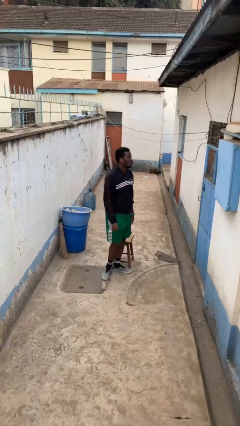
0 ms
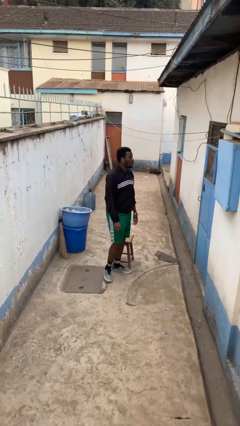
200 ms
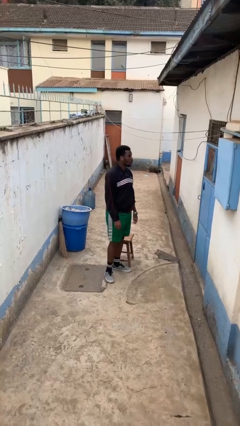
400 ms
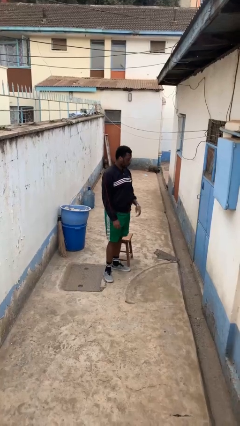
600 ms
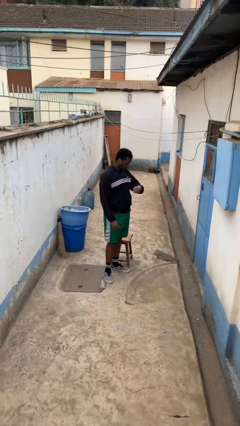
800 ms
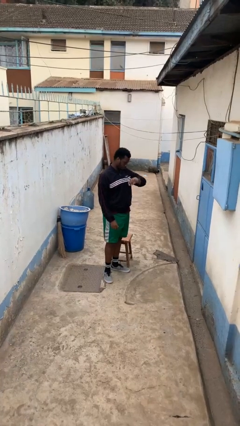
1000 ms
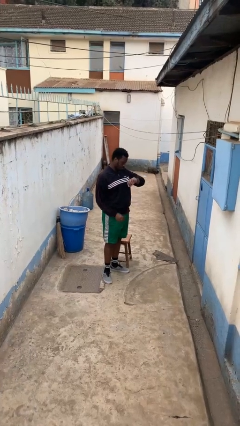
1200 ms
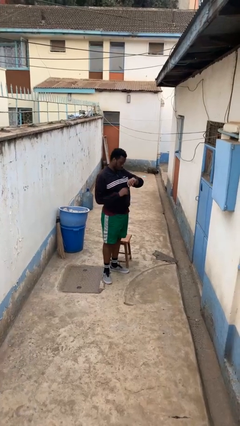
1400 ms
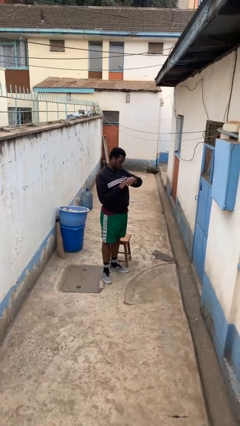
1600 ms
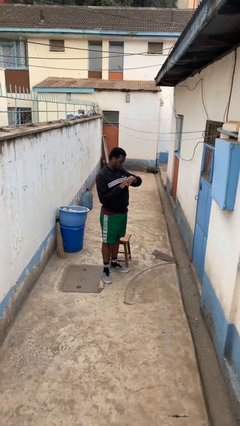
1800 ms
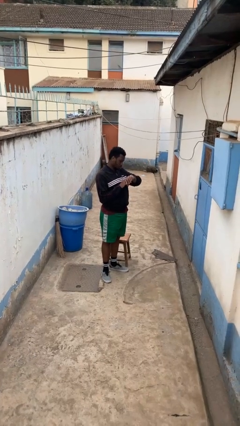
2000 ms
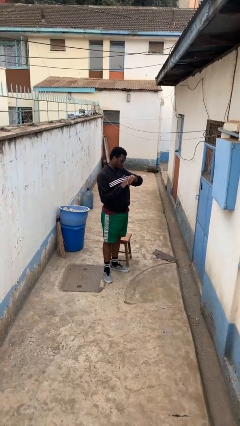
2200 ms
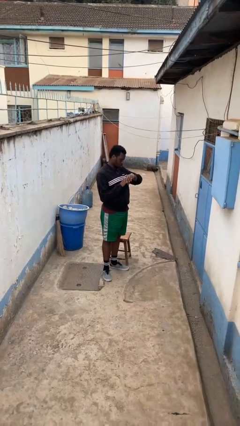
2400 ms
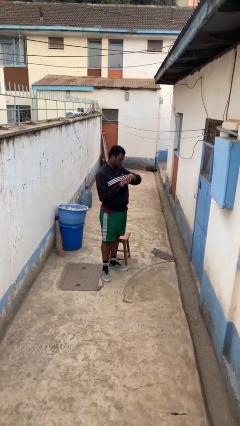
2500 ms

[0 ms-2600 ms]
person looks at wristwatch

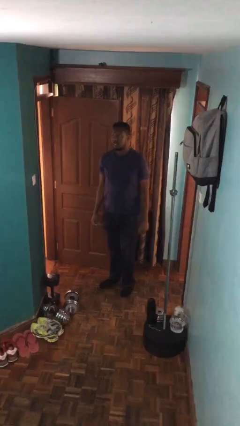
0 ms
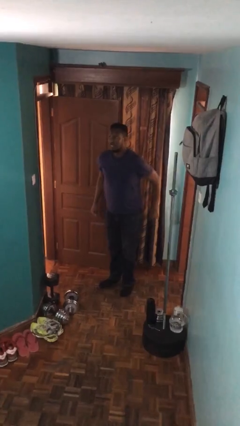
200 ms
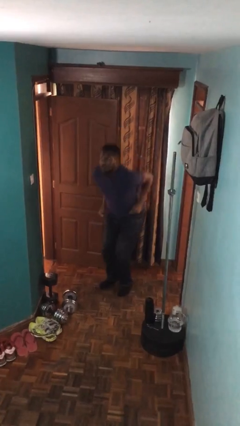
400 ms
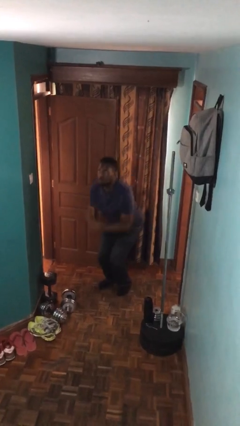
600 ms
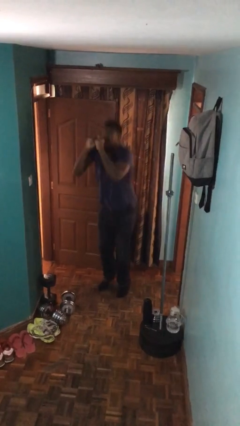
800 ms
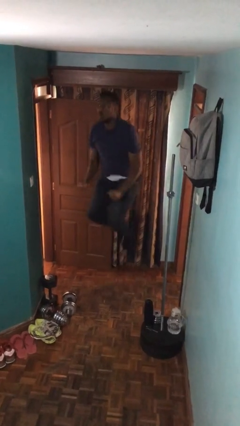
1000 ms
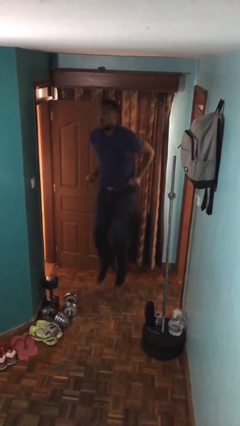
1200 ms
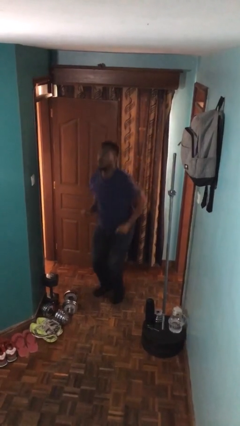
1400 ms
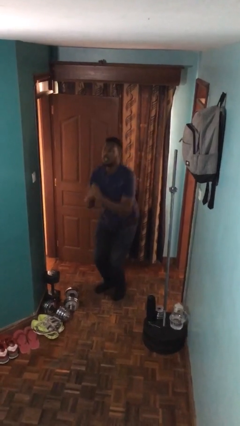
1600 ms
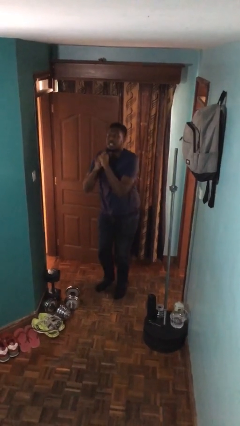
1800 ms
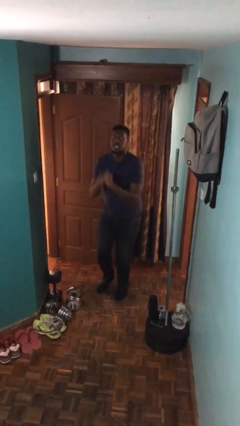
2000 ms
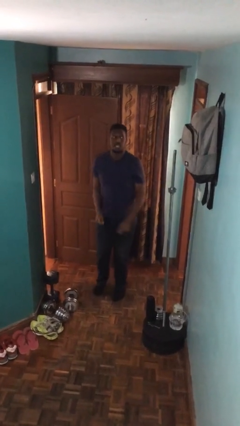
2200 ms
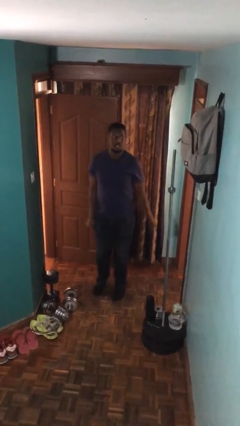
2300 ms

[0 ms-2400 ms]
person jumps

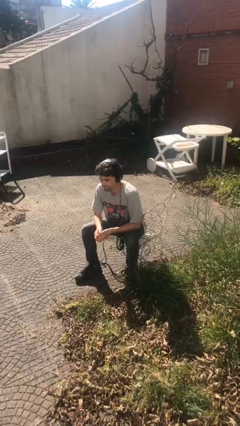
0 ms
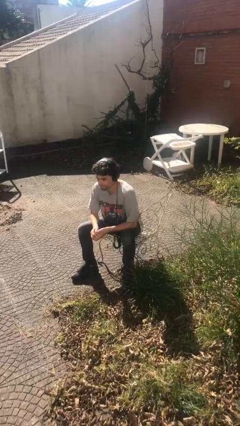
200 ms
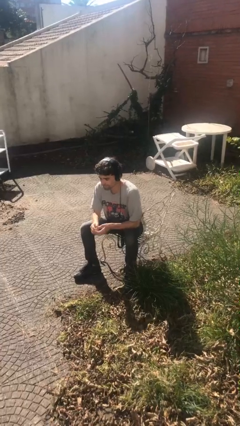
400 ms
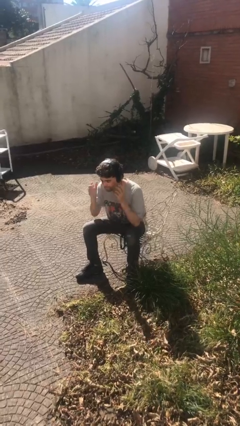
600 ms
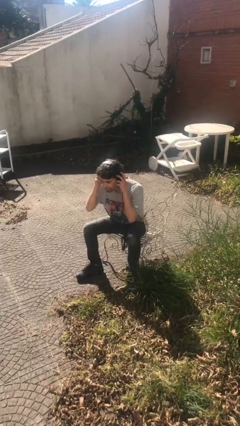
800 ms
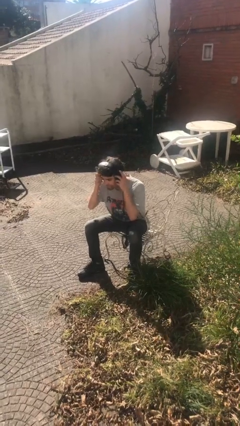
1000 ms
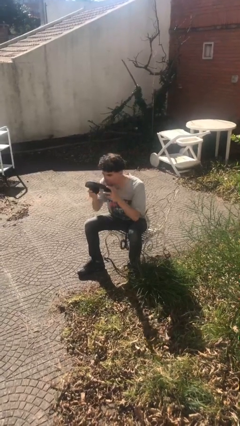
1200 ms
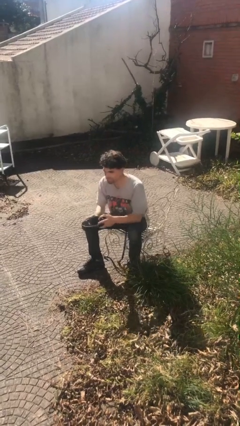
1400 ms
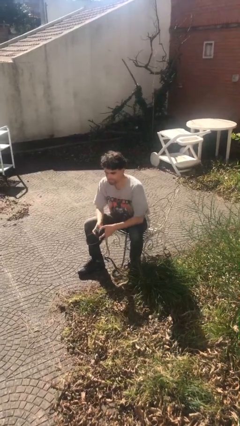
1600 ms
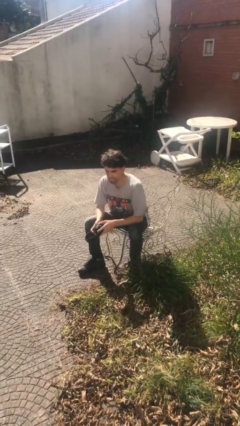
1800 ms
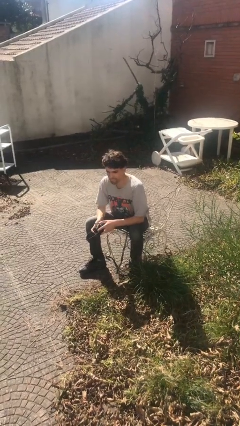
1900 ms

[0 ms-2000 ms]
person takes off headphones

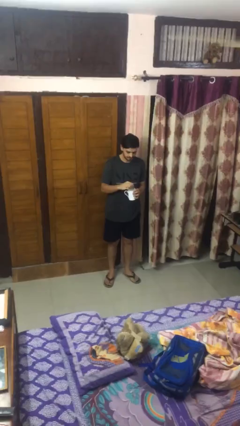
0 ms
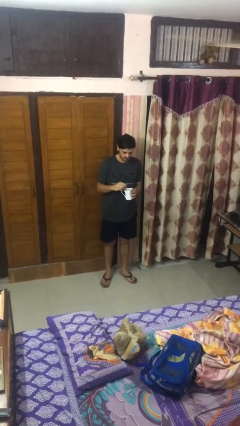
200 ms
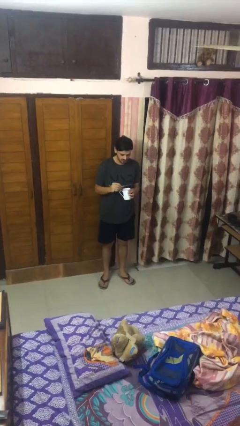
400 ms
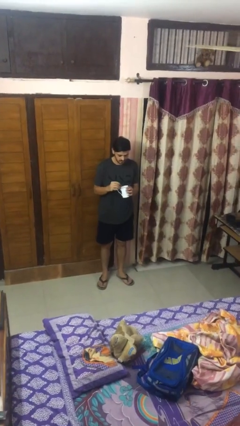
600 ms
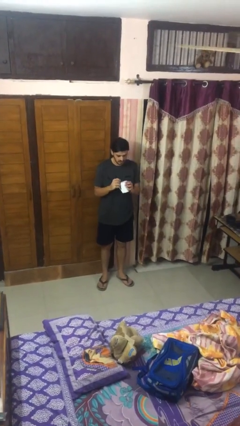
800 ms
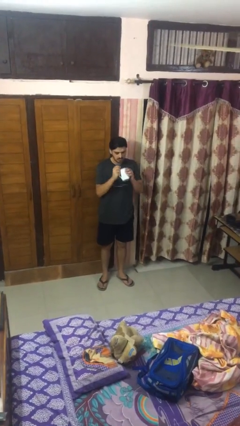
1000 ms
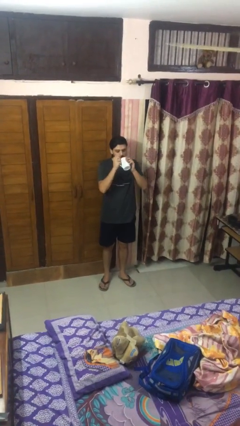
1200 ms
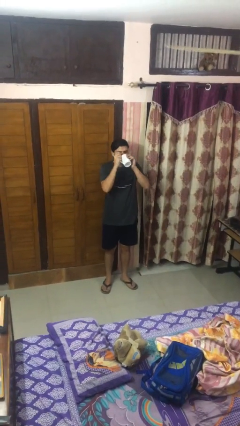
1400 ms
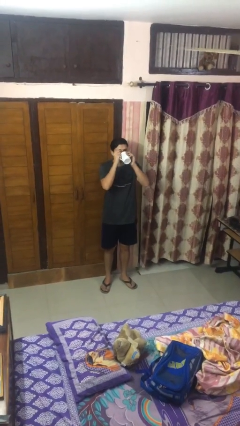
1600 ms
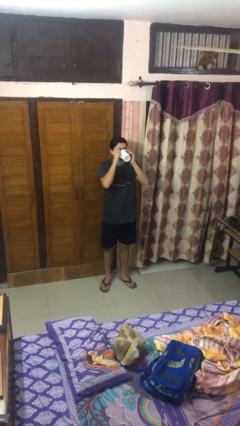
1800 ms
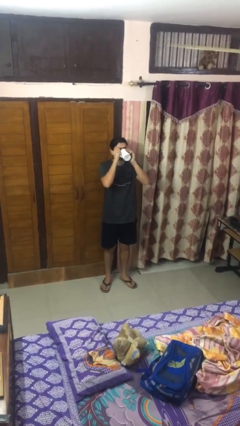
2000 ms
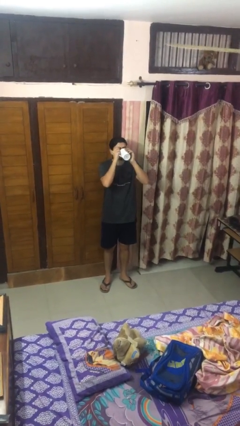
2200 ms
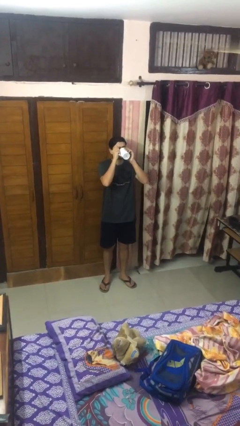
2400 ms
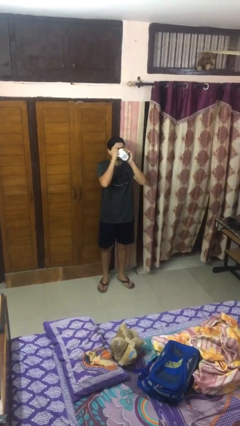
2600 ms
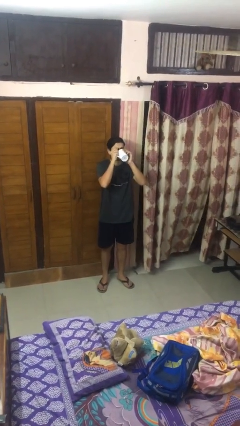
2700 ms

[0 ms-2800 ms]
person drinks from mug

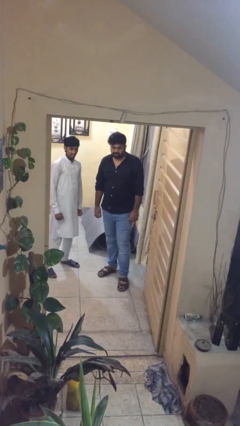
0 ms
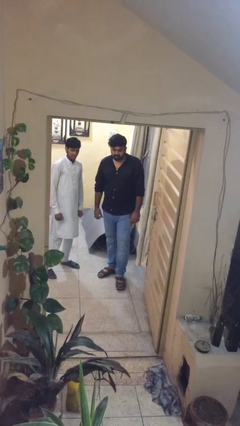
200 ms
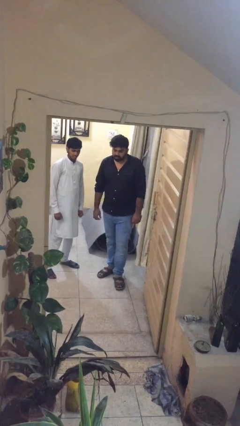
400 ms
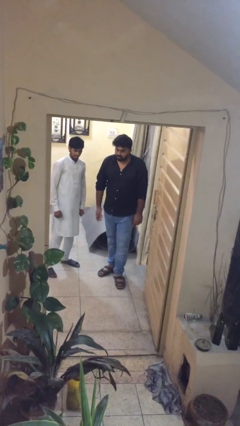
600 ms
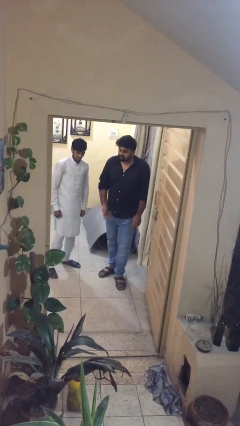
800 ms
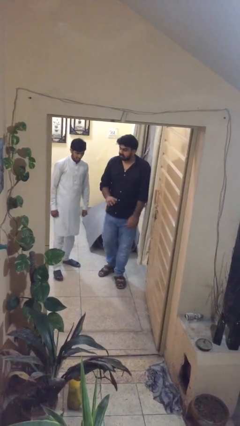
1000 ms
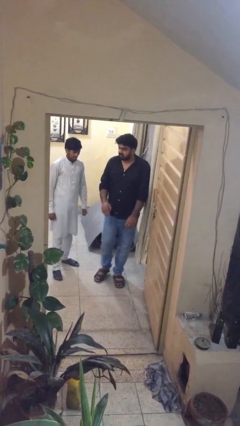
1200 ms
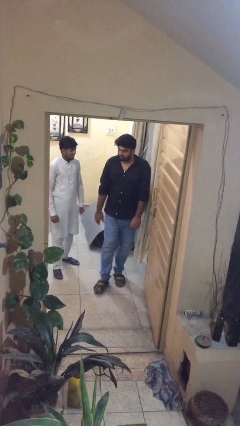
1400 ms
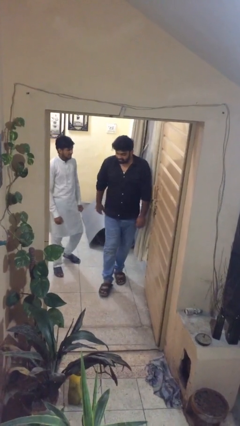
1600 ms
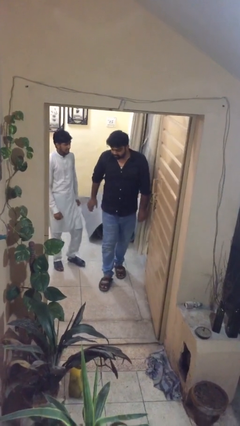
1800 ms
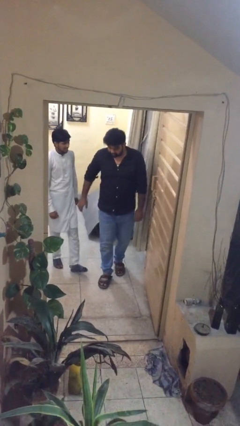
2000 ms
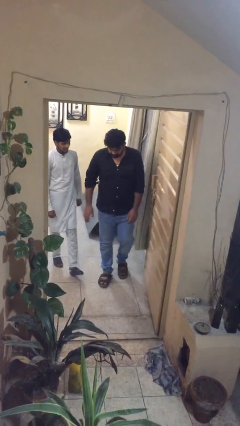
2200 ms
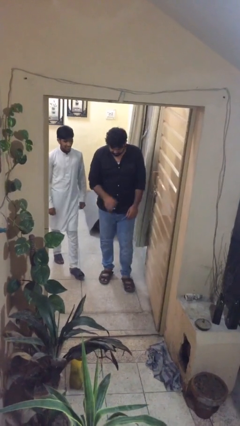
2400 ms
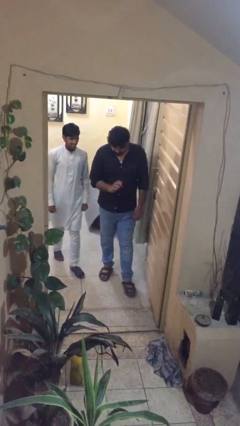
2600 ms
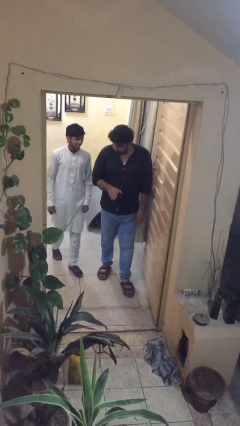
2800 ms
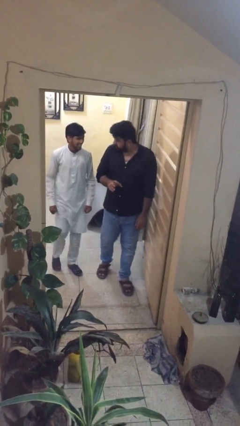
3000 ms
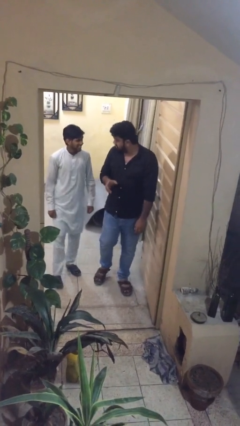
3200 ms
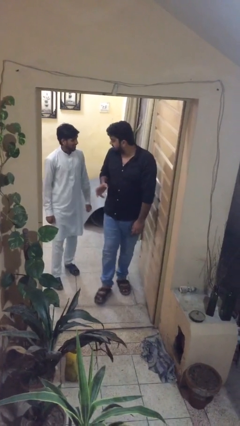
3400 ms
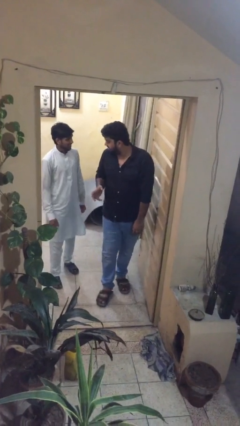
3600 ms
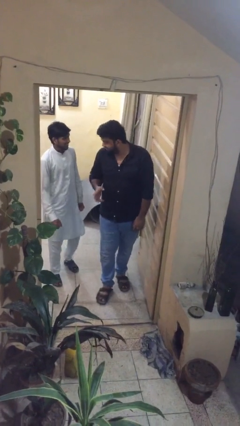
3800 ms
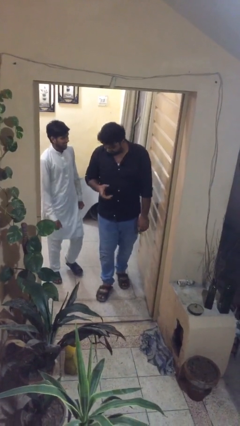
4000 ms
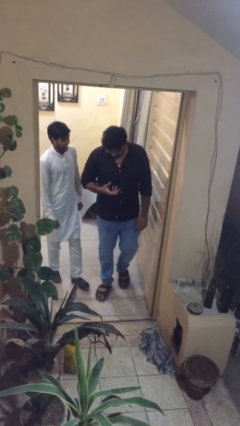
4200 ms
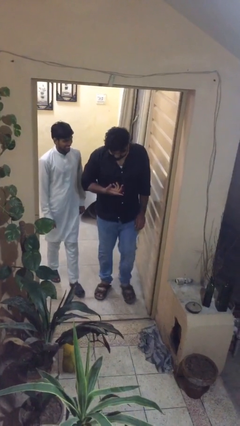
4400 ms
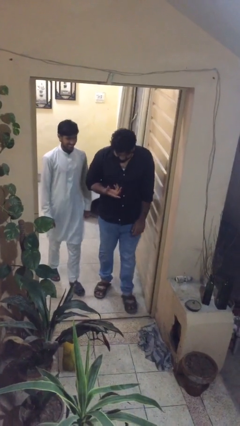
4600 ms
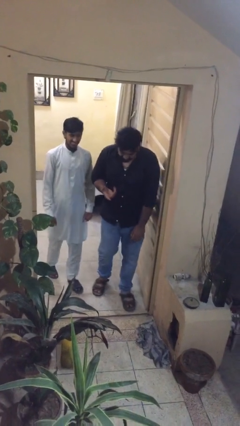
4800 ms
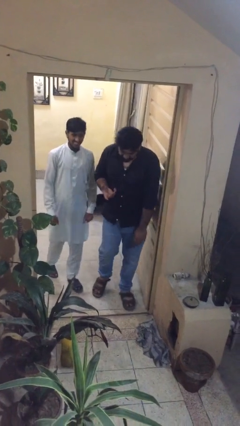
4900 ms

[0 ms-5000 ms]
person talks to person

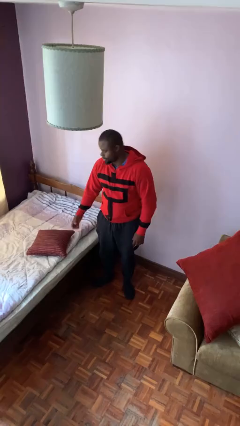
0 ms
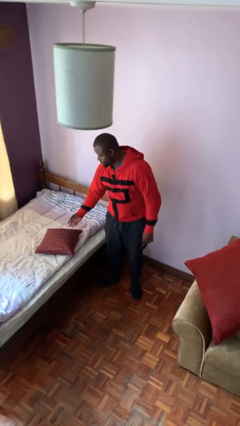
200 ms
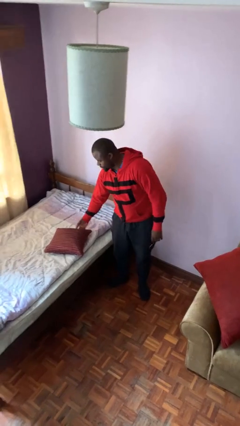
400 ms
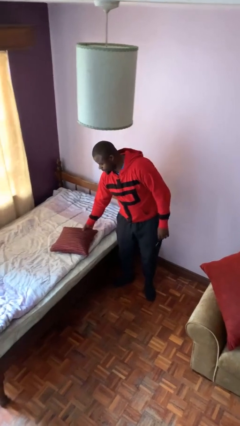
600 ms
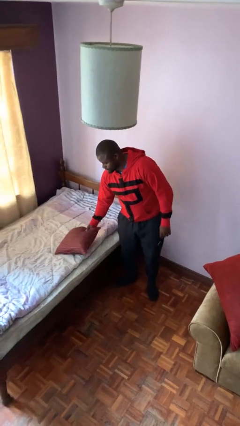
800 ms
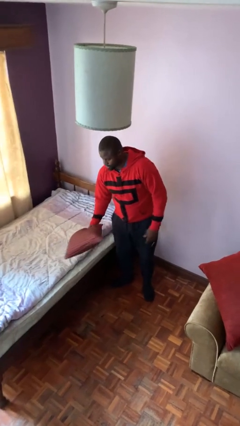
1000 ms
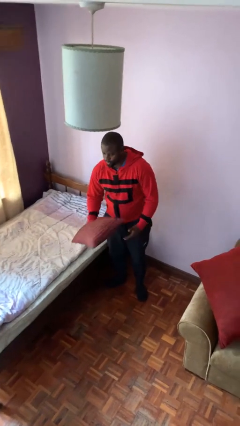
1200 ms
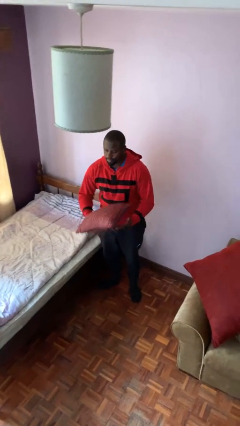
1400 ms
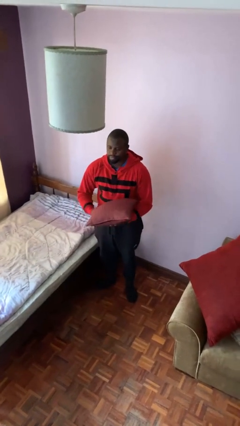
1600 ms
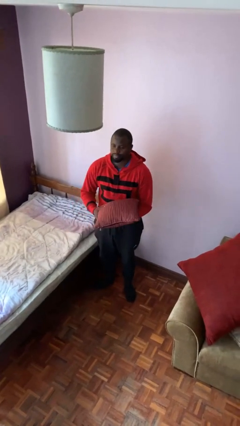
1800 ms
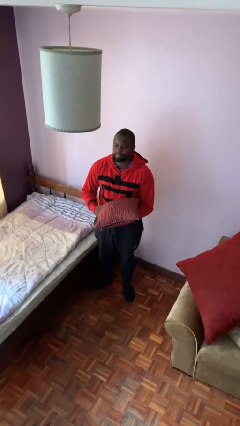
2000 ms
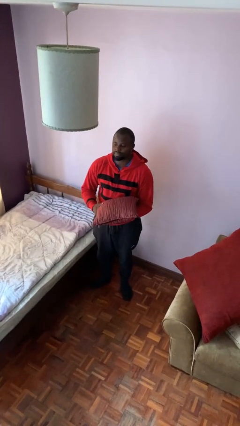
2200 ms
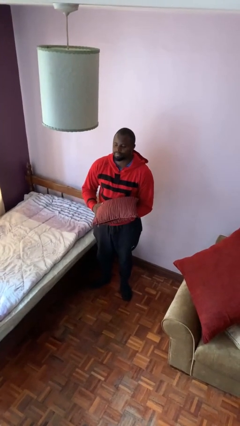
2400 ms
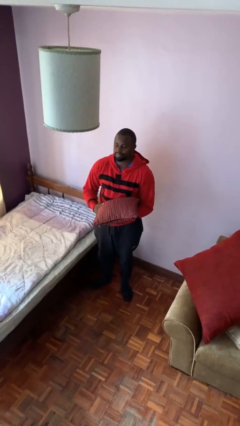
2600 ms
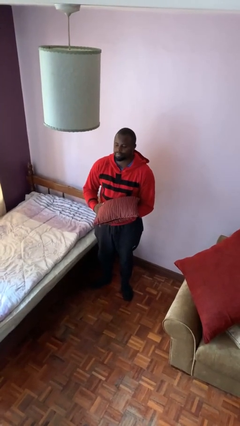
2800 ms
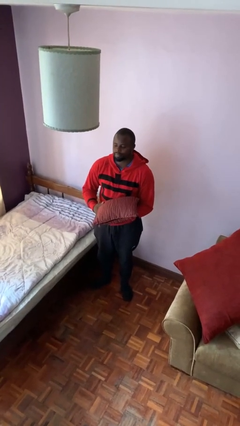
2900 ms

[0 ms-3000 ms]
person picks up object from bed
